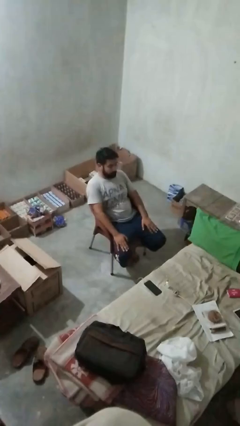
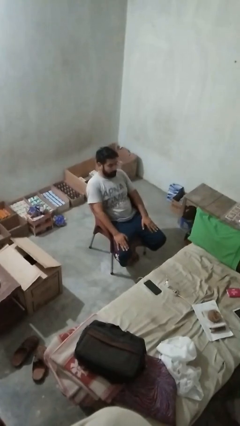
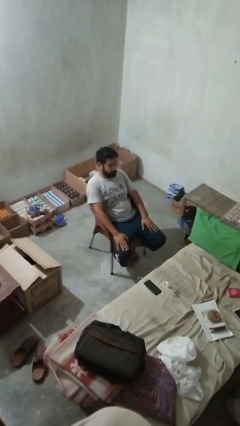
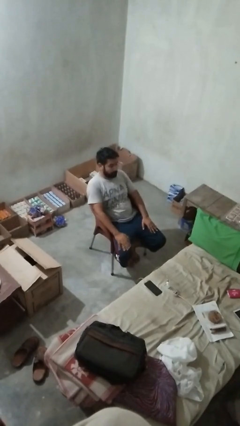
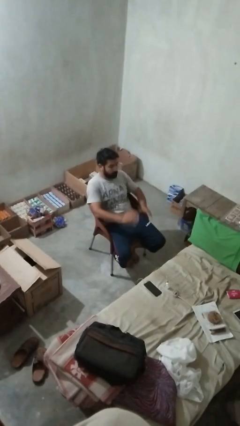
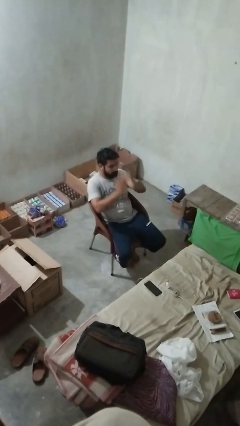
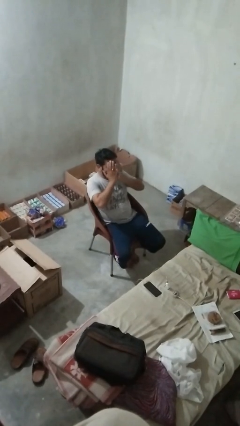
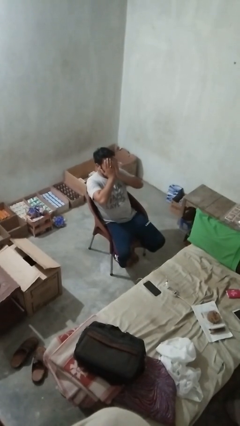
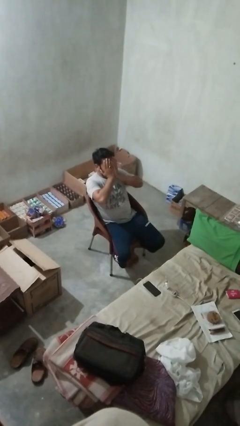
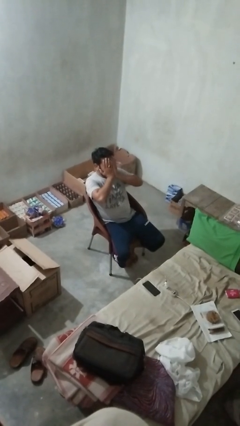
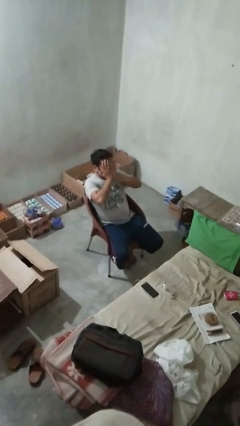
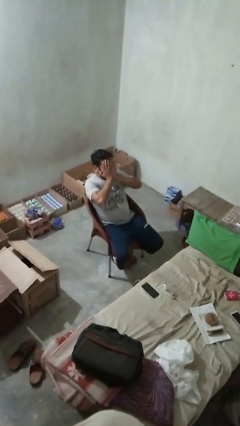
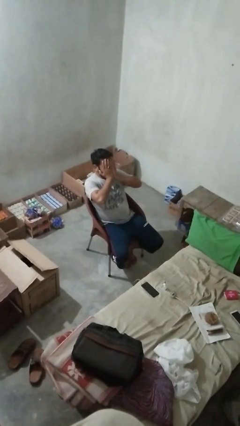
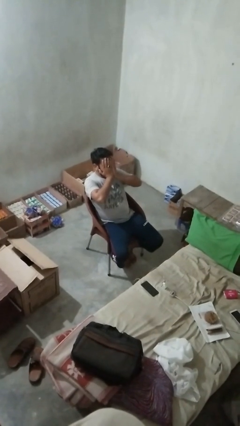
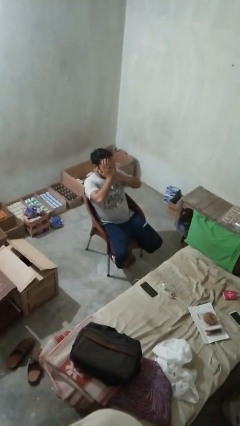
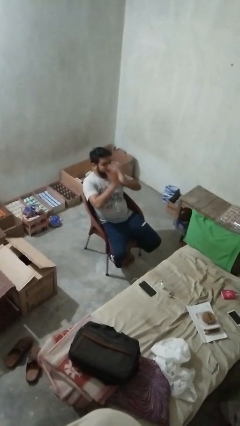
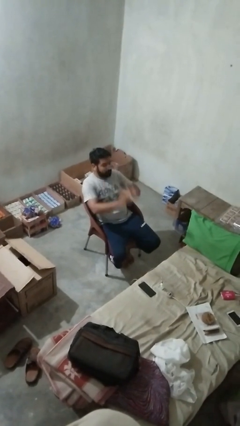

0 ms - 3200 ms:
person covers face with hands

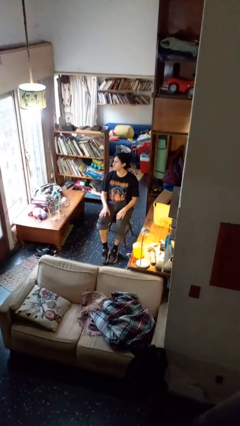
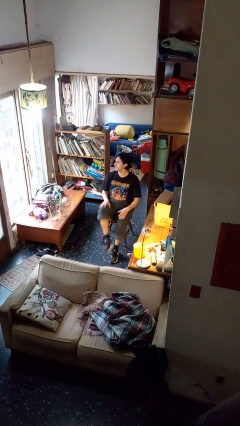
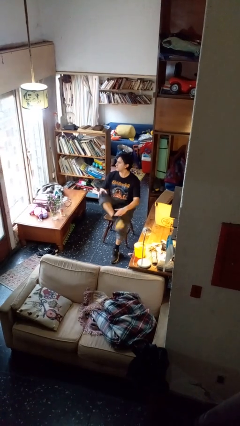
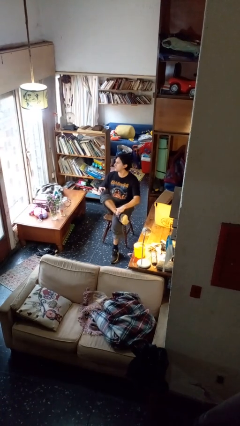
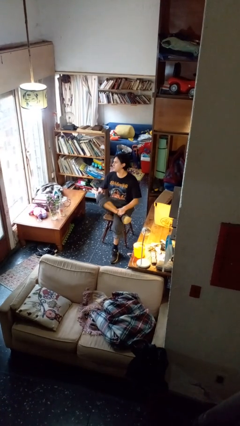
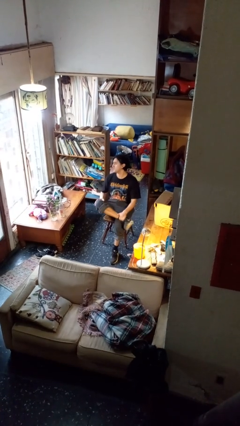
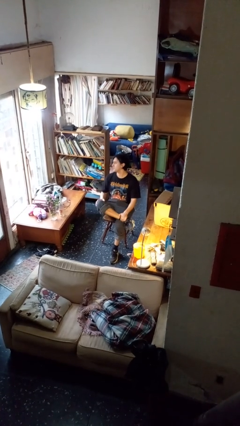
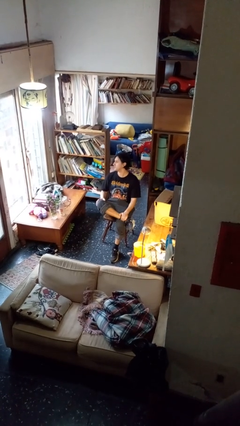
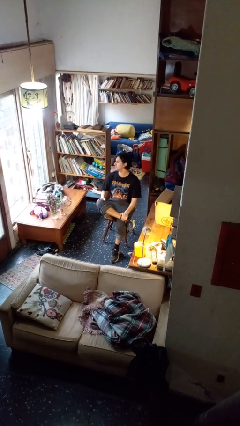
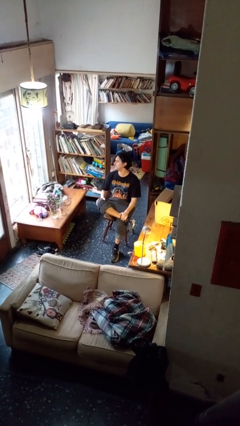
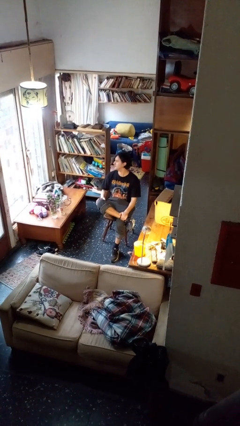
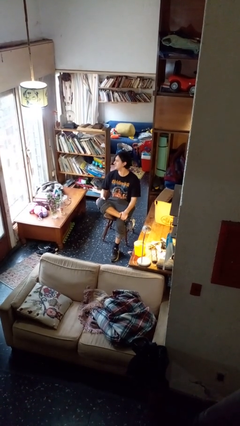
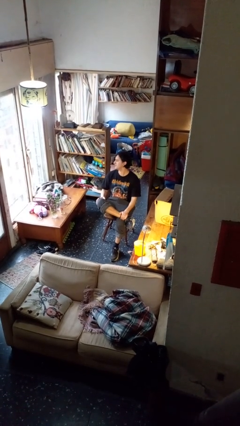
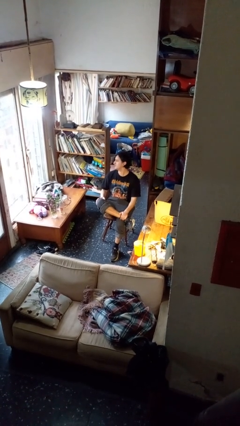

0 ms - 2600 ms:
person crosses legs

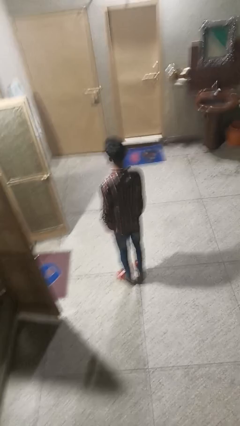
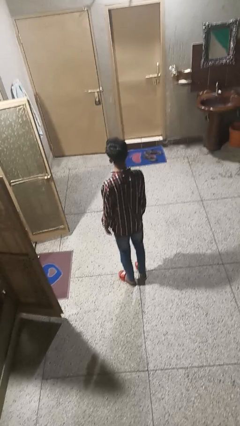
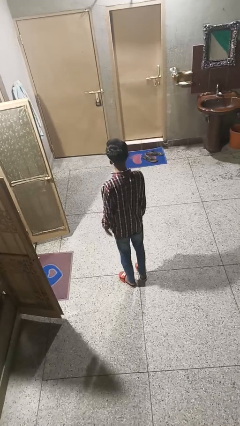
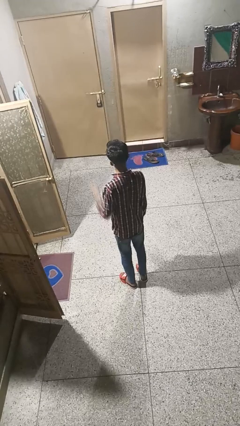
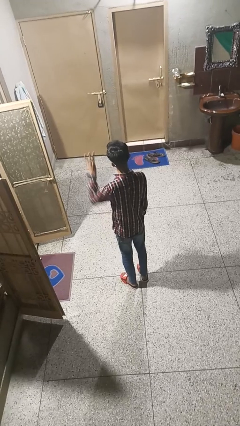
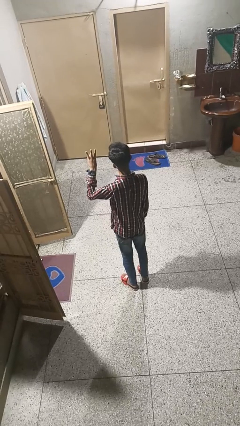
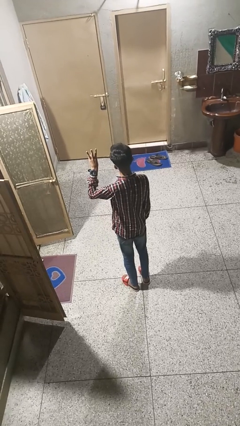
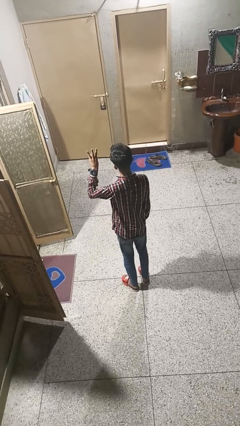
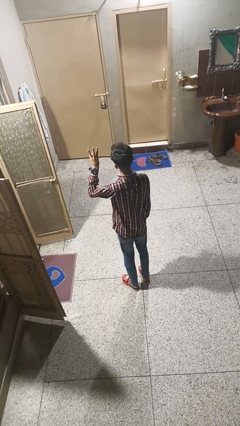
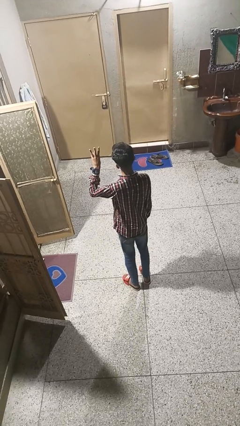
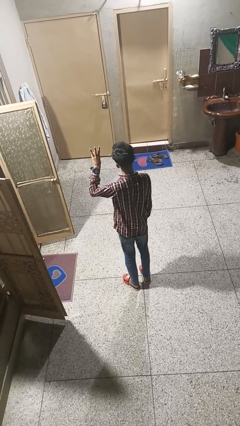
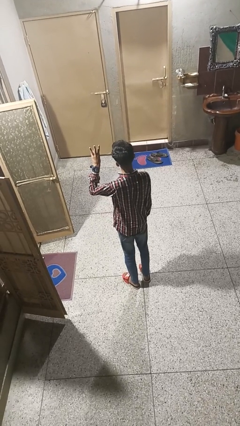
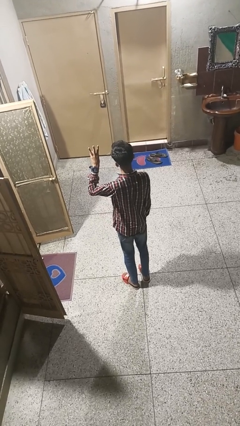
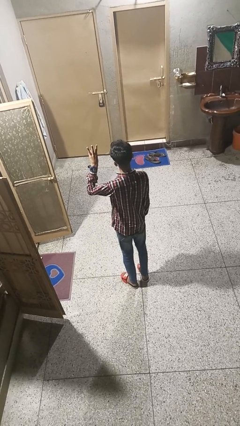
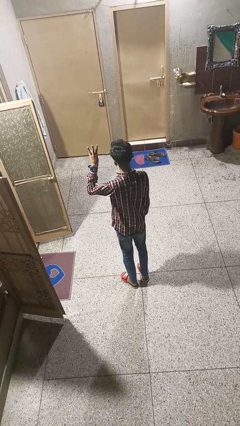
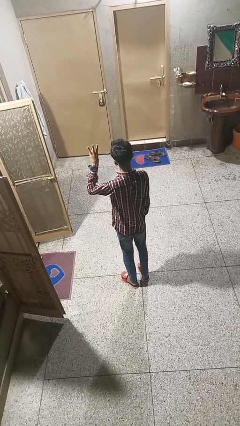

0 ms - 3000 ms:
person gestures number three

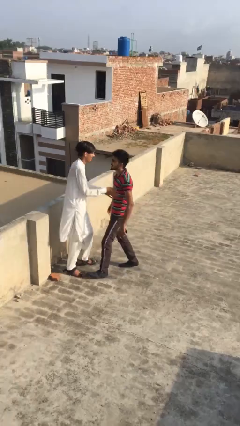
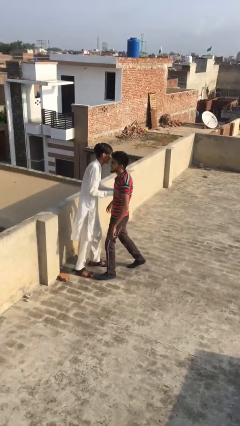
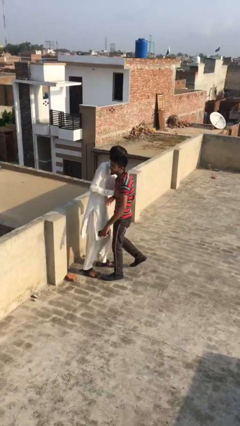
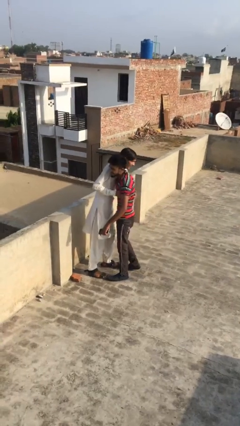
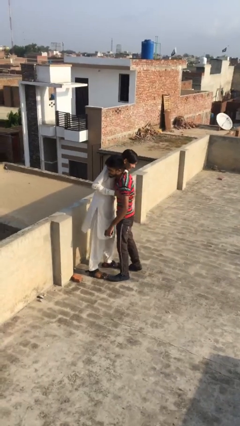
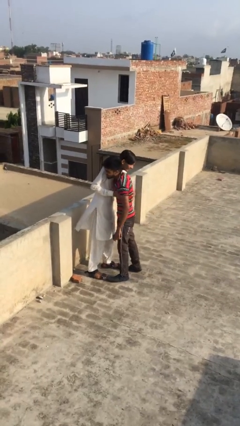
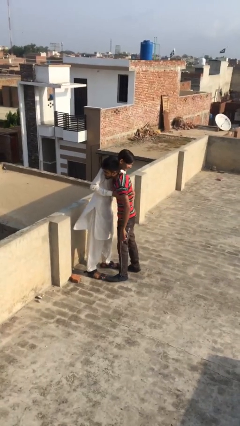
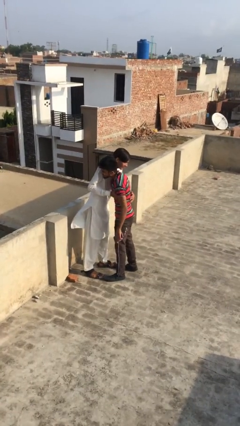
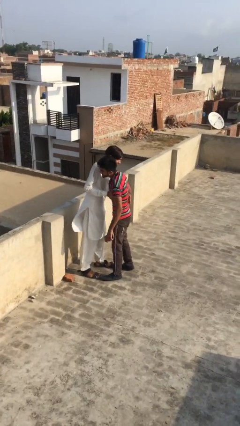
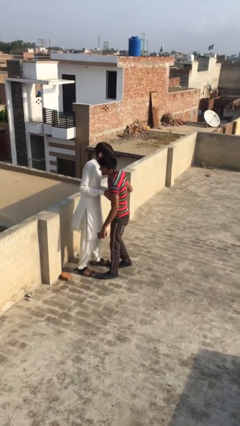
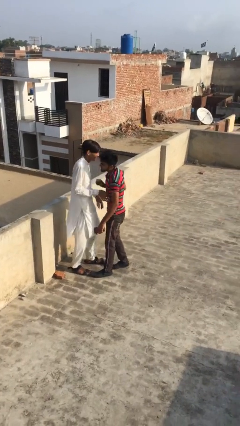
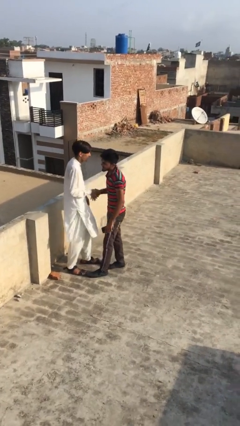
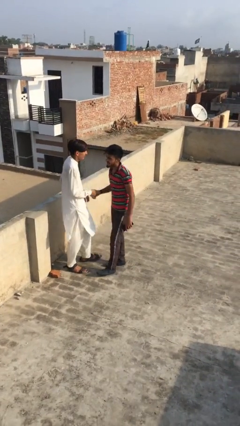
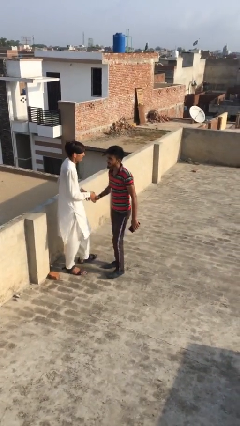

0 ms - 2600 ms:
person embraces person

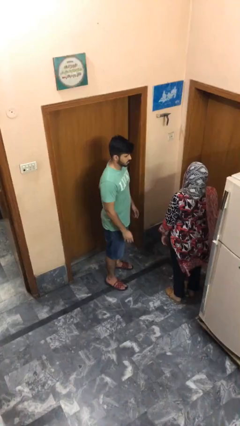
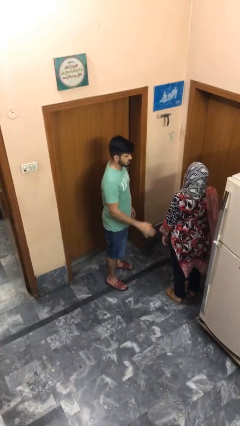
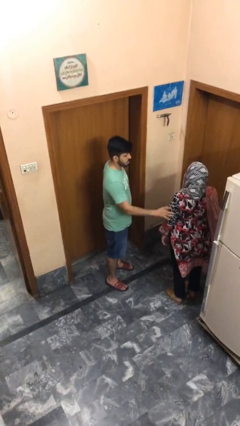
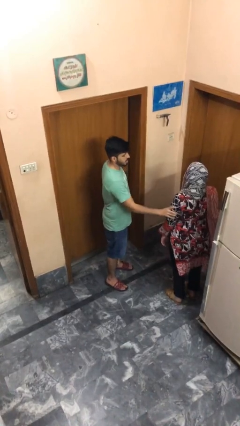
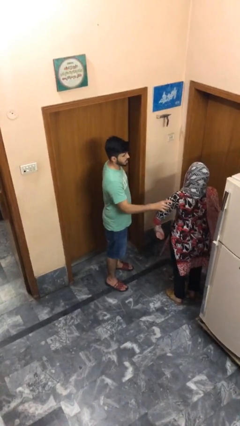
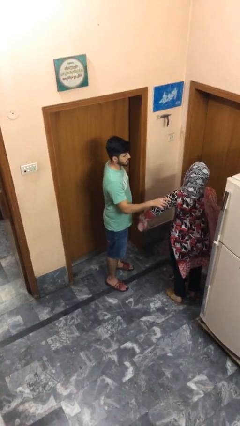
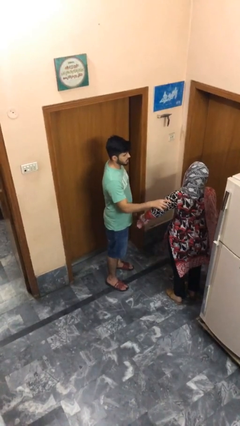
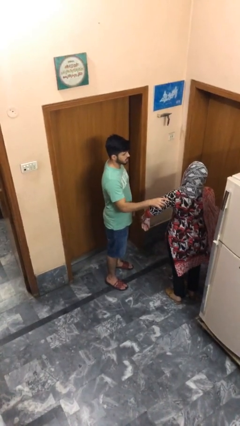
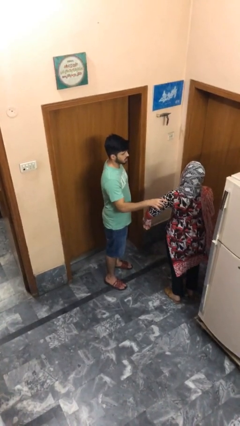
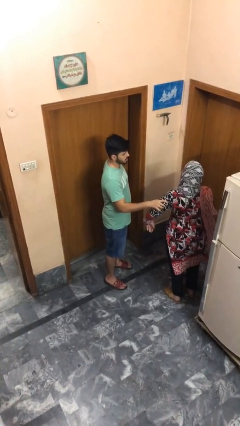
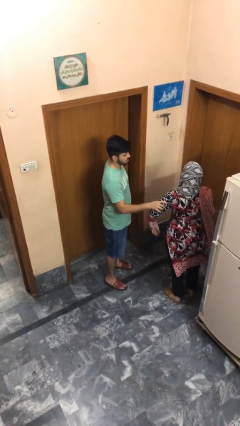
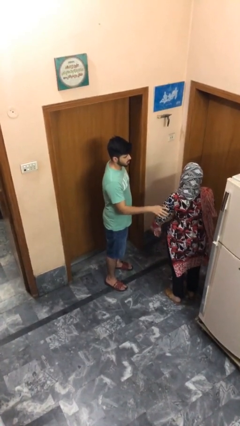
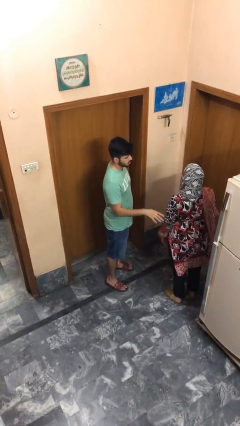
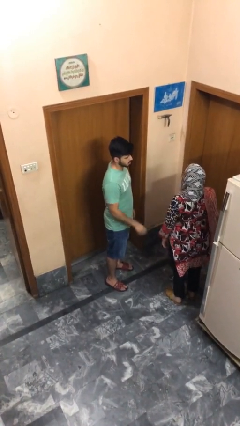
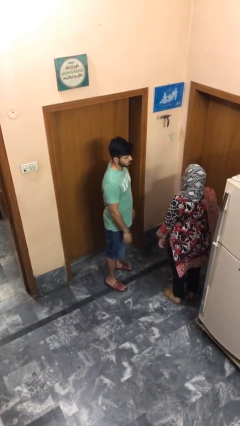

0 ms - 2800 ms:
person grabs person by bicep

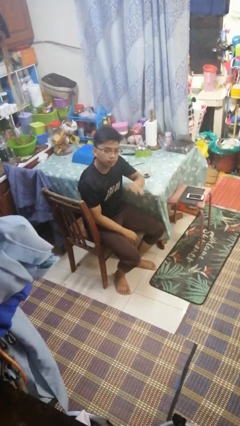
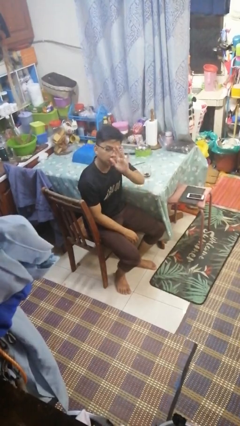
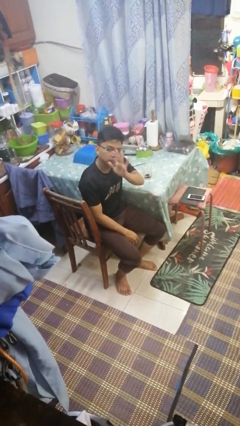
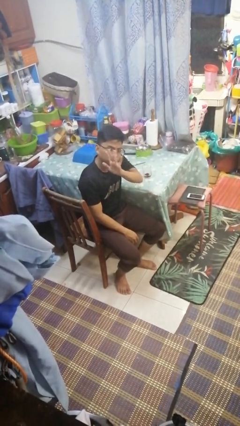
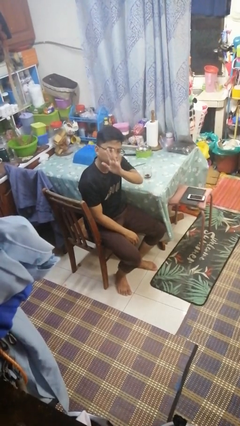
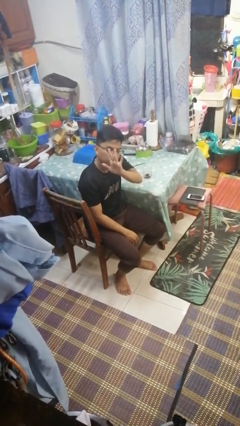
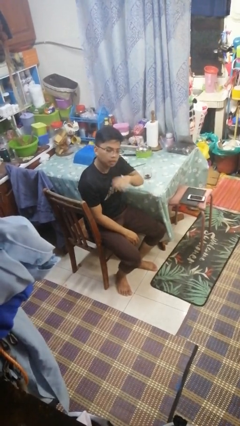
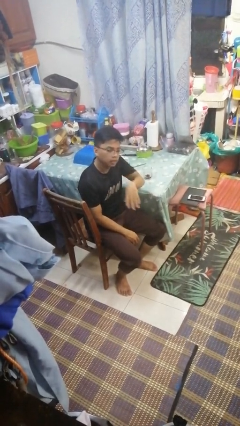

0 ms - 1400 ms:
person gestures number five

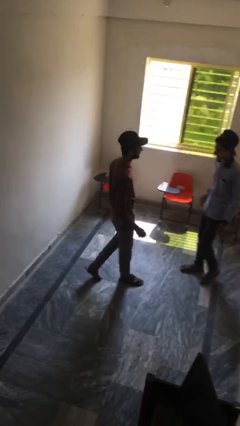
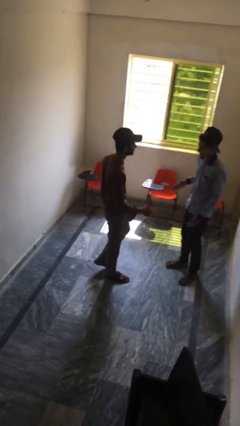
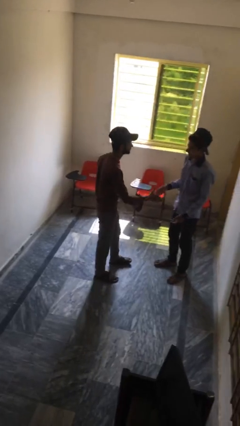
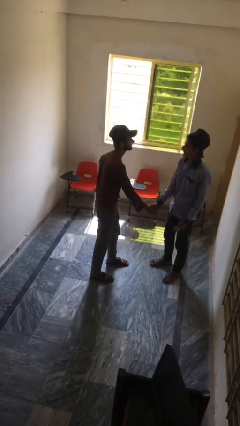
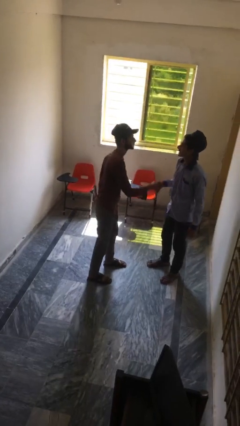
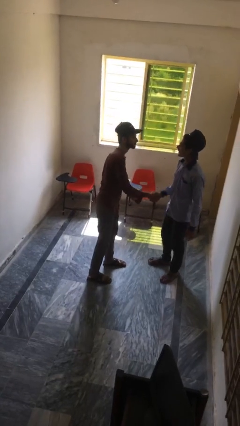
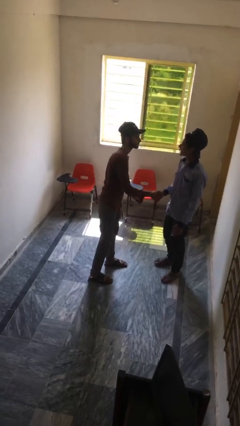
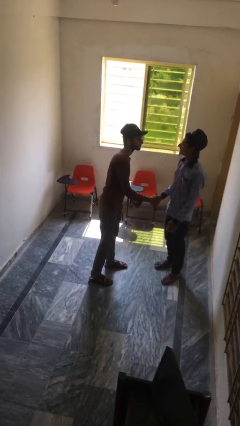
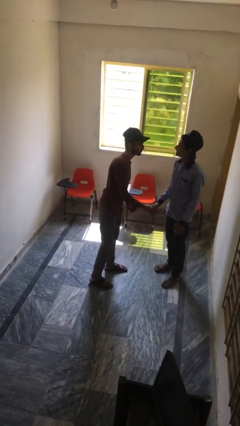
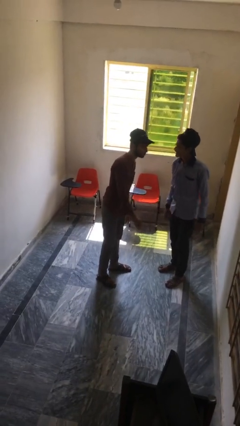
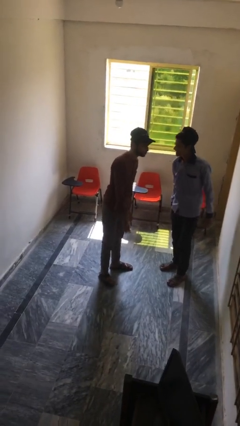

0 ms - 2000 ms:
person shakes hand
